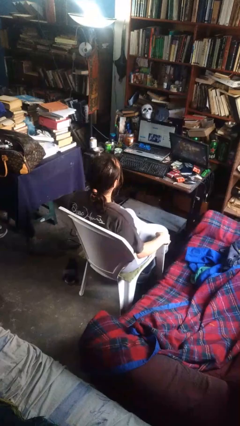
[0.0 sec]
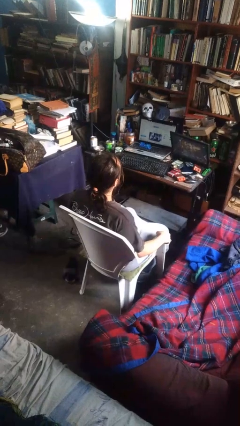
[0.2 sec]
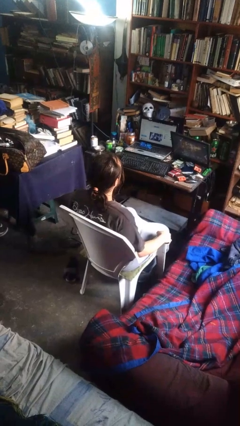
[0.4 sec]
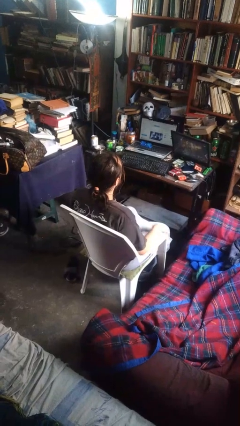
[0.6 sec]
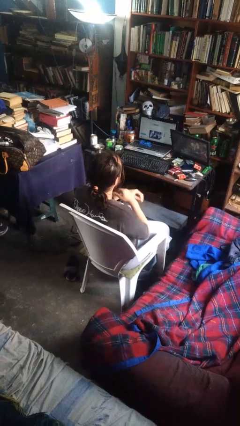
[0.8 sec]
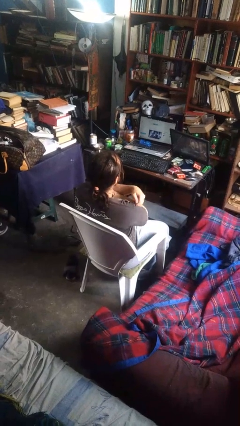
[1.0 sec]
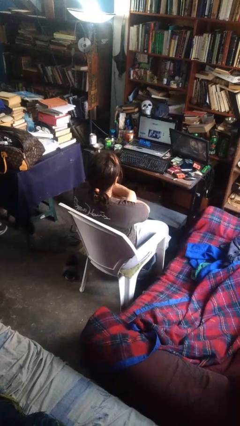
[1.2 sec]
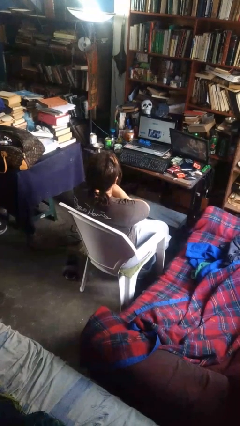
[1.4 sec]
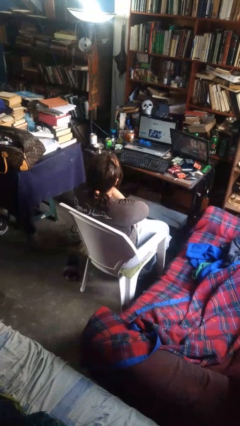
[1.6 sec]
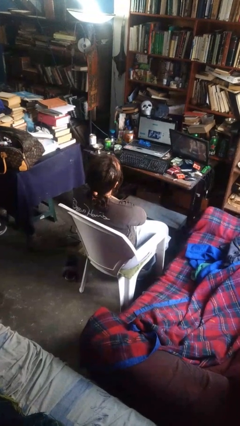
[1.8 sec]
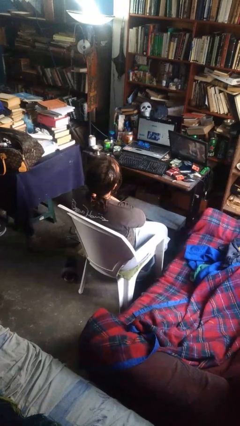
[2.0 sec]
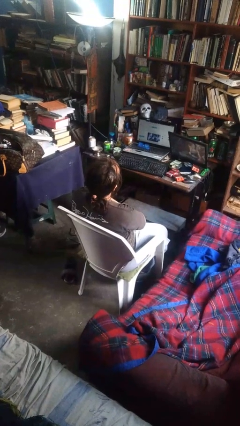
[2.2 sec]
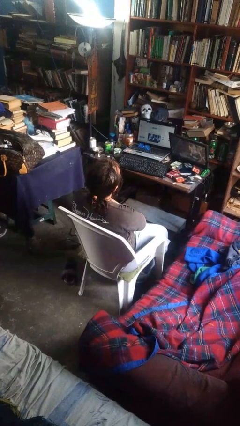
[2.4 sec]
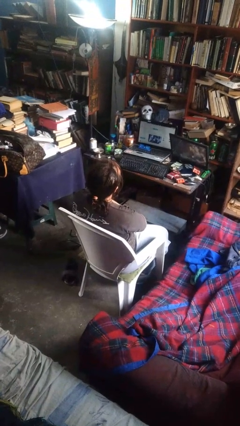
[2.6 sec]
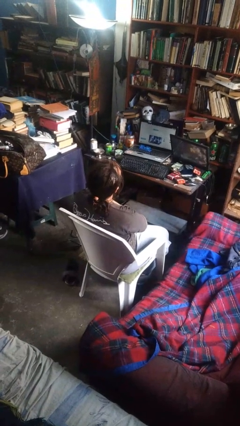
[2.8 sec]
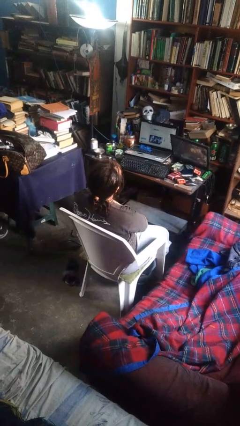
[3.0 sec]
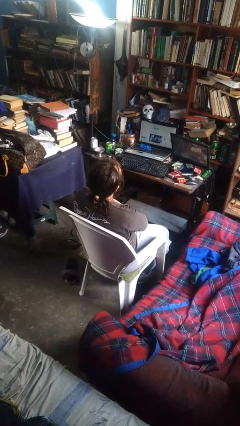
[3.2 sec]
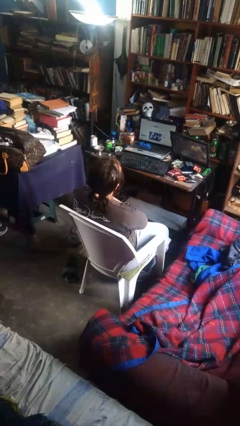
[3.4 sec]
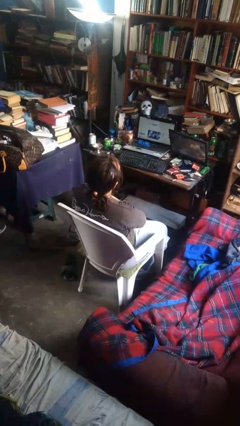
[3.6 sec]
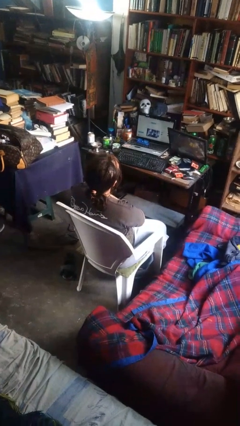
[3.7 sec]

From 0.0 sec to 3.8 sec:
person crosses arms

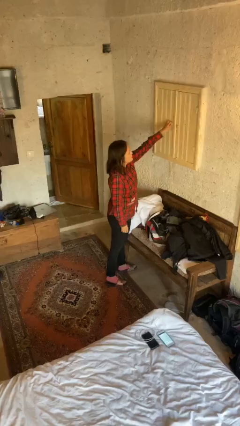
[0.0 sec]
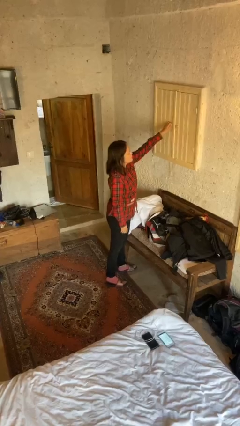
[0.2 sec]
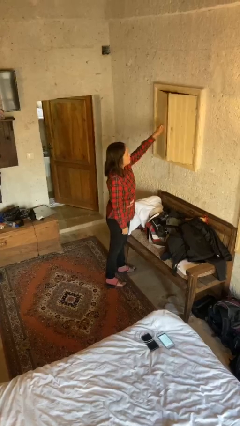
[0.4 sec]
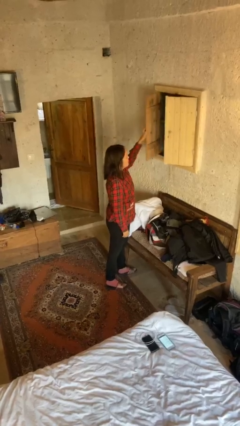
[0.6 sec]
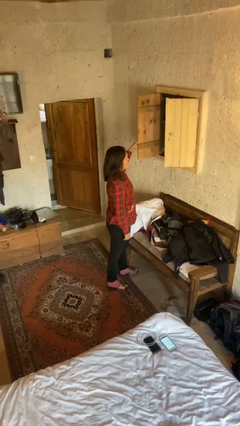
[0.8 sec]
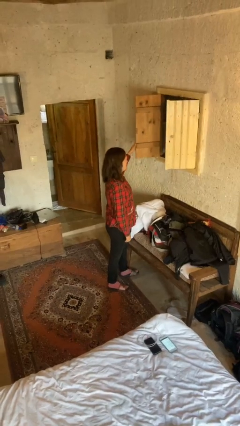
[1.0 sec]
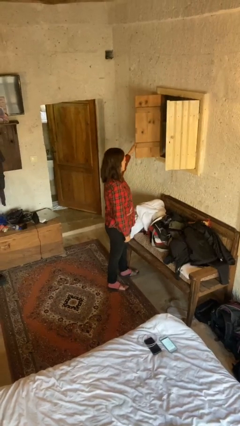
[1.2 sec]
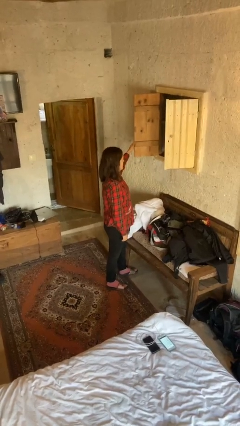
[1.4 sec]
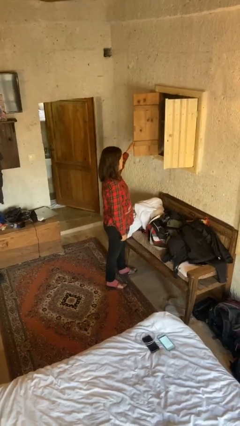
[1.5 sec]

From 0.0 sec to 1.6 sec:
person opens closet door

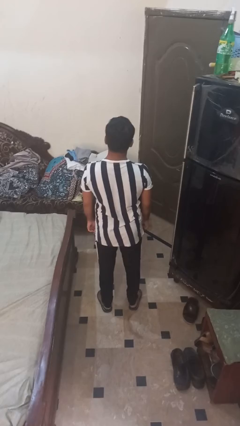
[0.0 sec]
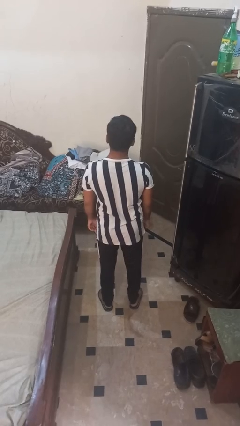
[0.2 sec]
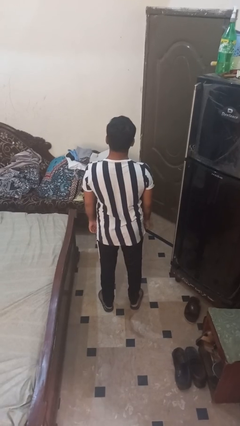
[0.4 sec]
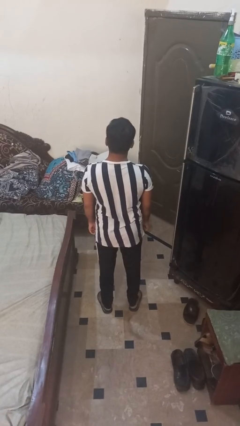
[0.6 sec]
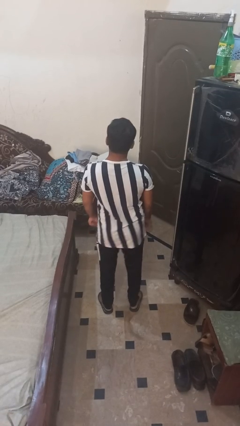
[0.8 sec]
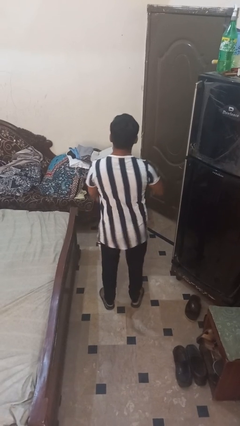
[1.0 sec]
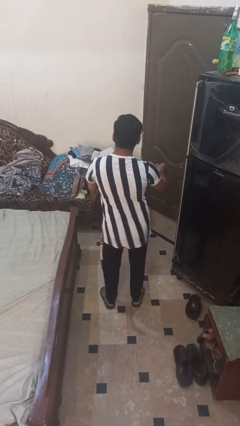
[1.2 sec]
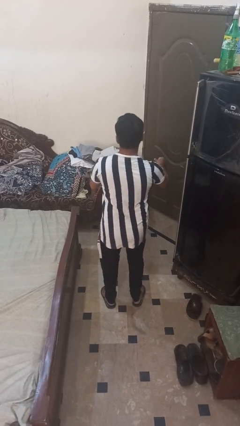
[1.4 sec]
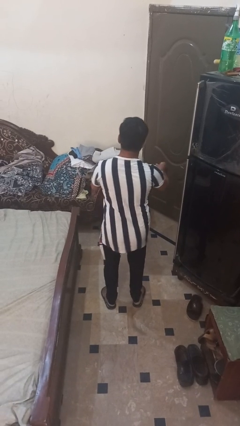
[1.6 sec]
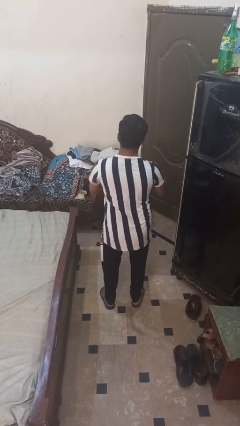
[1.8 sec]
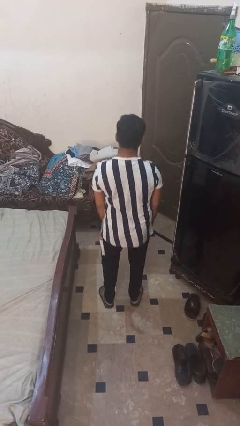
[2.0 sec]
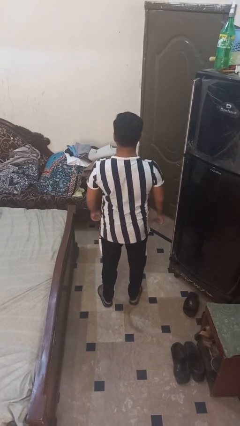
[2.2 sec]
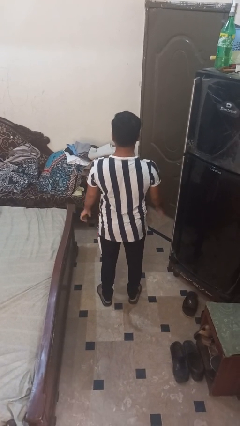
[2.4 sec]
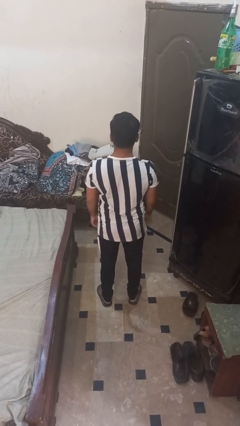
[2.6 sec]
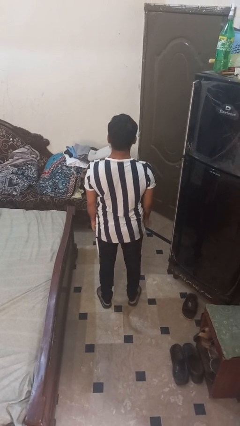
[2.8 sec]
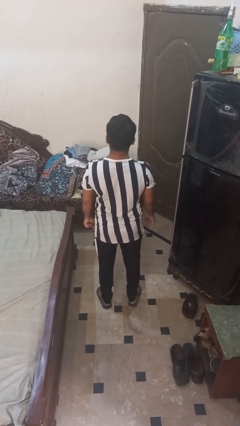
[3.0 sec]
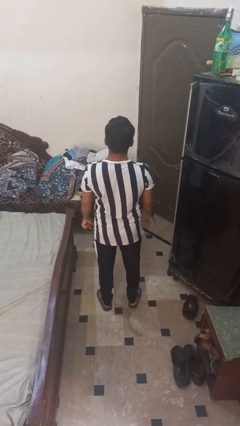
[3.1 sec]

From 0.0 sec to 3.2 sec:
person wiggles hips

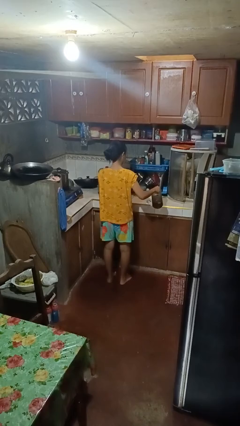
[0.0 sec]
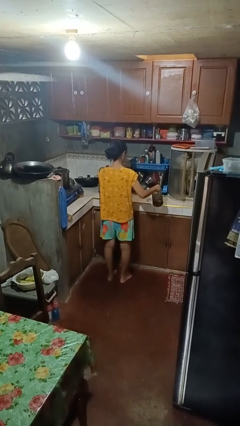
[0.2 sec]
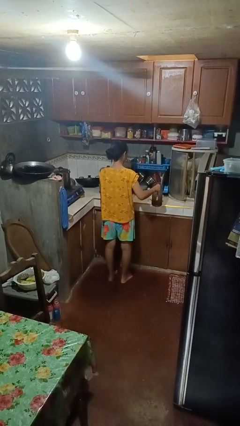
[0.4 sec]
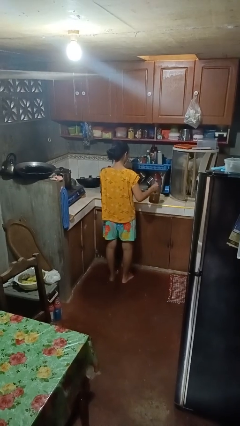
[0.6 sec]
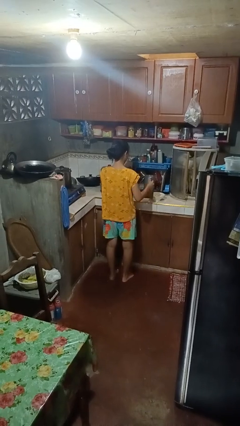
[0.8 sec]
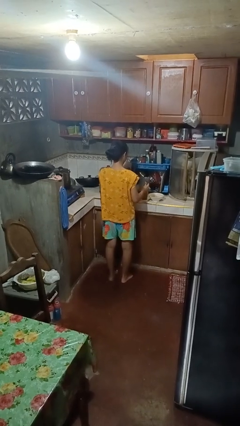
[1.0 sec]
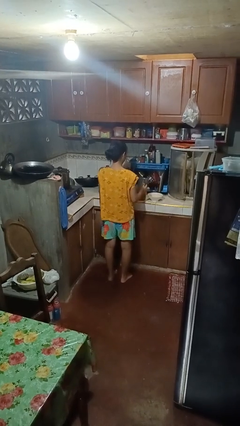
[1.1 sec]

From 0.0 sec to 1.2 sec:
person pours into bowl

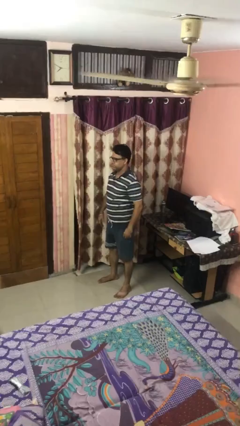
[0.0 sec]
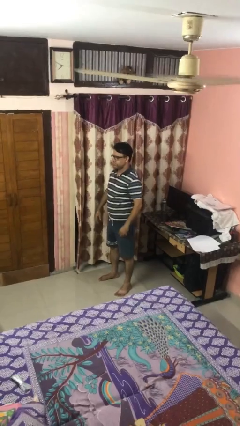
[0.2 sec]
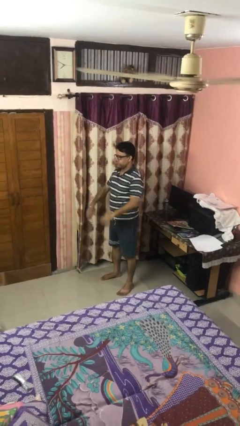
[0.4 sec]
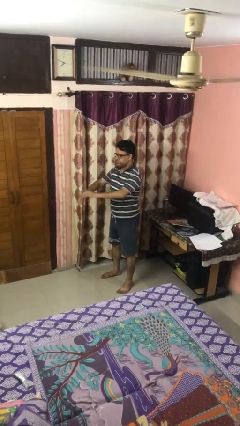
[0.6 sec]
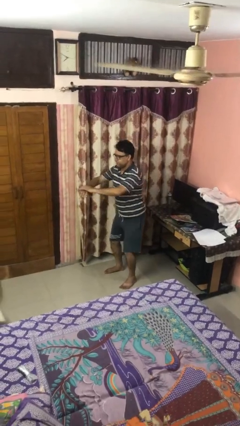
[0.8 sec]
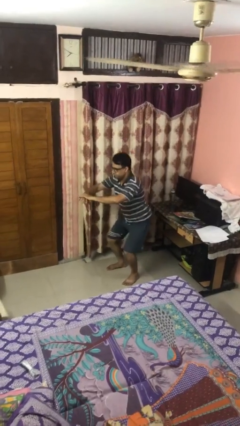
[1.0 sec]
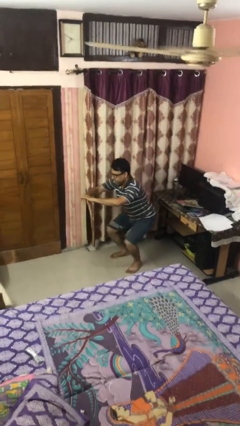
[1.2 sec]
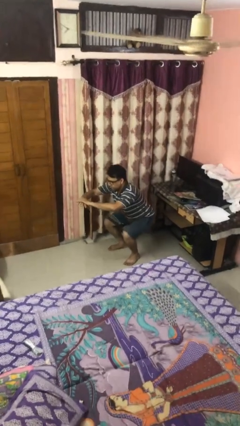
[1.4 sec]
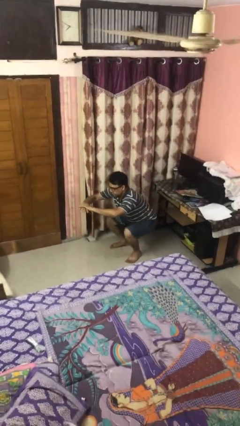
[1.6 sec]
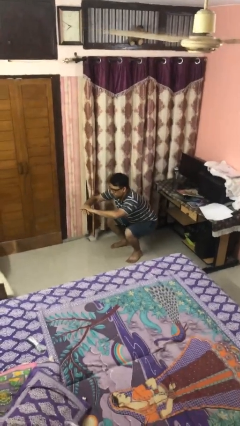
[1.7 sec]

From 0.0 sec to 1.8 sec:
person squats

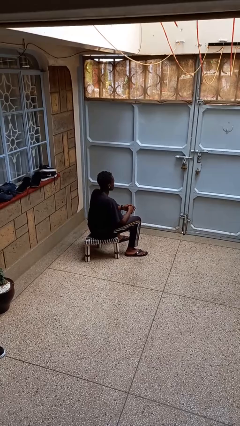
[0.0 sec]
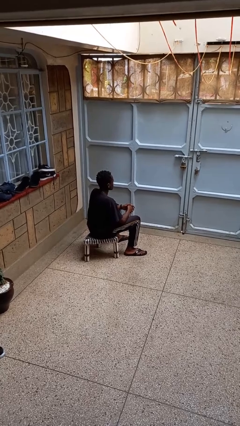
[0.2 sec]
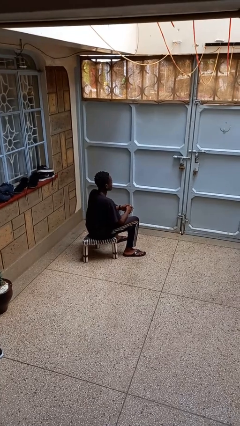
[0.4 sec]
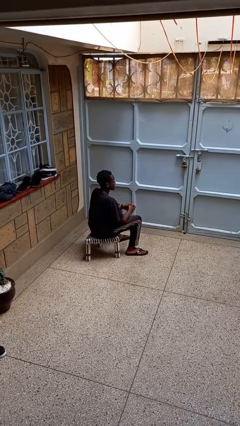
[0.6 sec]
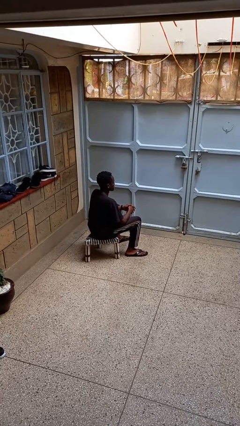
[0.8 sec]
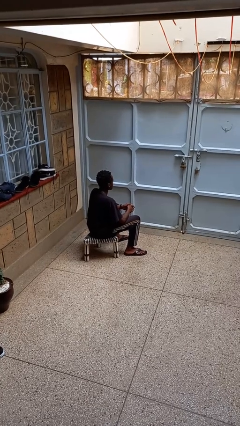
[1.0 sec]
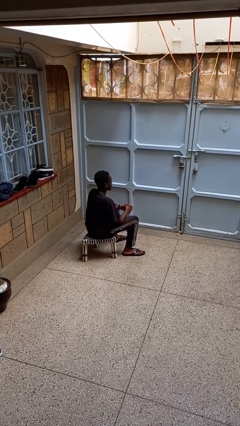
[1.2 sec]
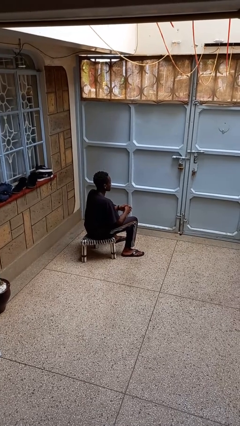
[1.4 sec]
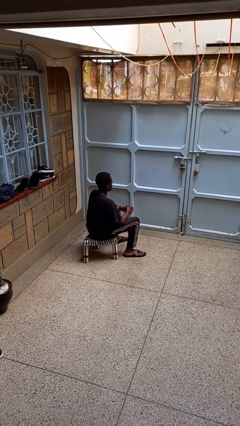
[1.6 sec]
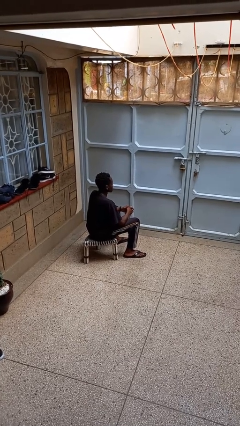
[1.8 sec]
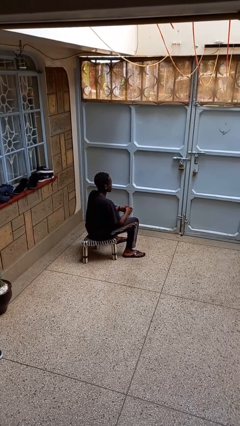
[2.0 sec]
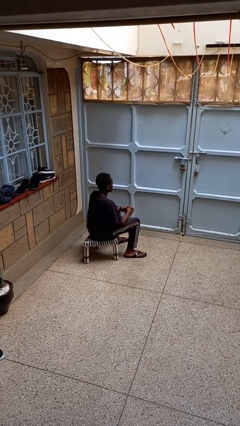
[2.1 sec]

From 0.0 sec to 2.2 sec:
person shakes head

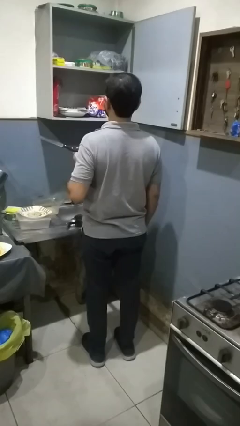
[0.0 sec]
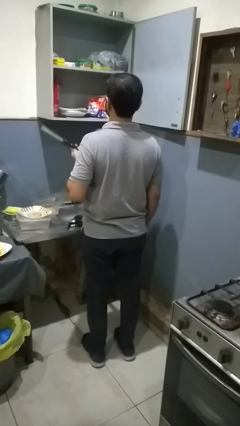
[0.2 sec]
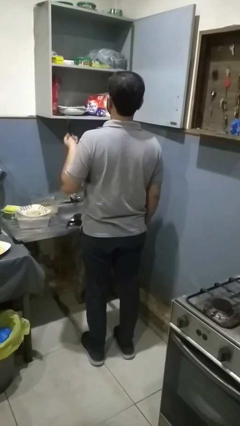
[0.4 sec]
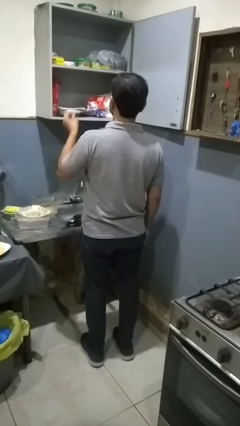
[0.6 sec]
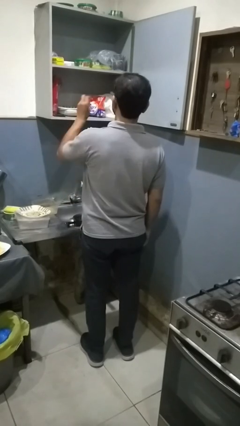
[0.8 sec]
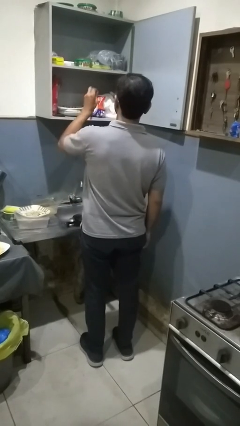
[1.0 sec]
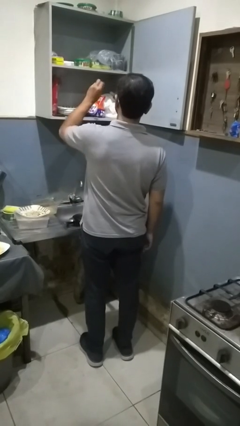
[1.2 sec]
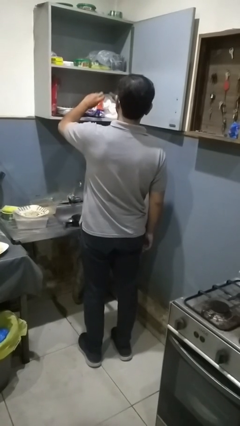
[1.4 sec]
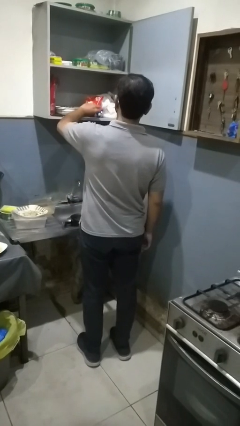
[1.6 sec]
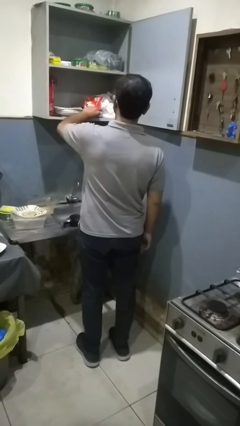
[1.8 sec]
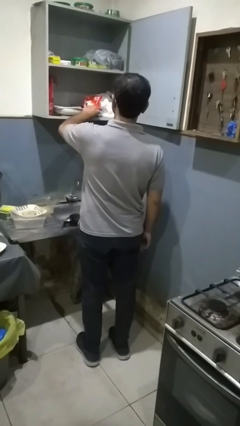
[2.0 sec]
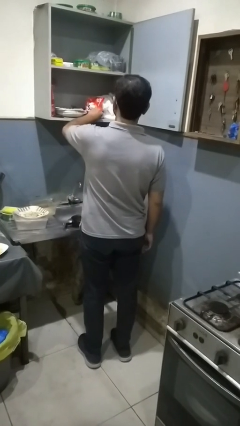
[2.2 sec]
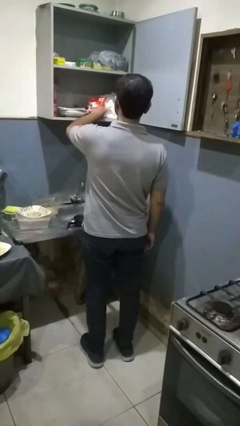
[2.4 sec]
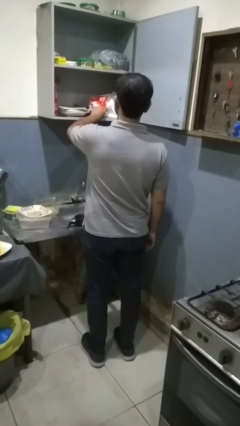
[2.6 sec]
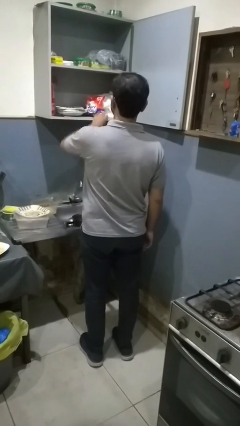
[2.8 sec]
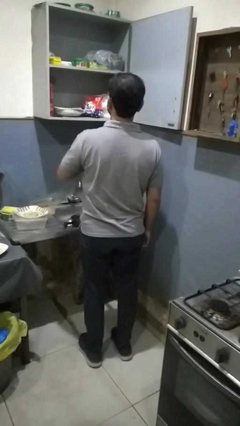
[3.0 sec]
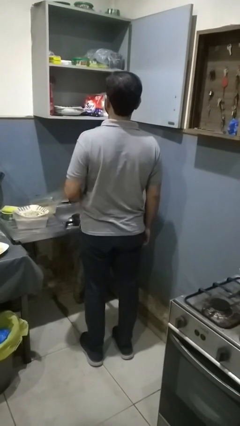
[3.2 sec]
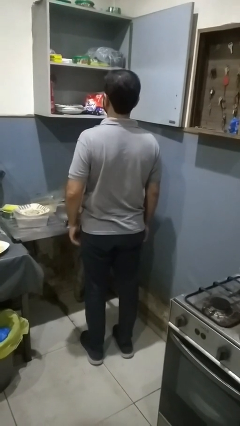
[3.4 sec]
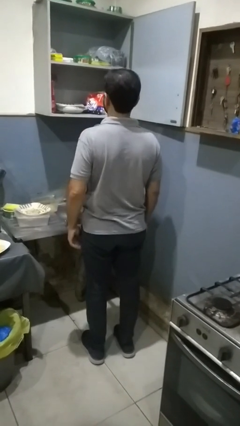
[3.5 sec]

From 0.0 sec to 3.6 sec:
person puts object in cabinet
